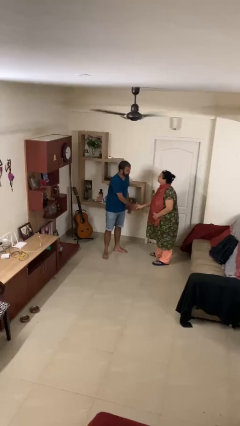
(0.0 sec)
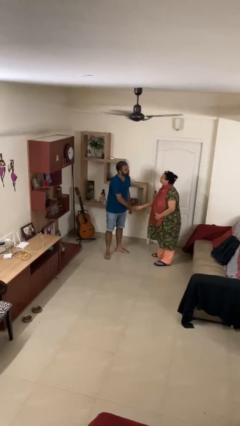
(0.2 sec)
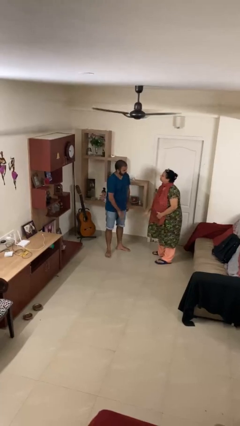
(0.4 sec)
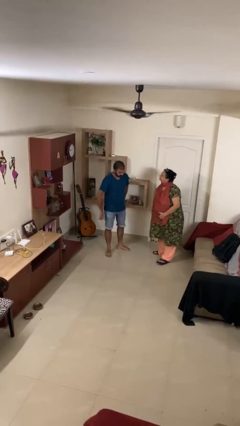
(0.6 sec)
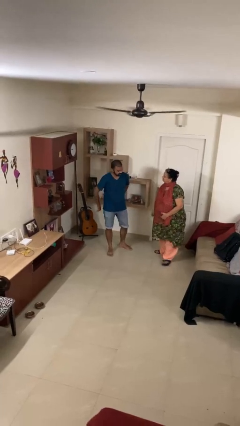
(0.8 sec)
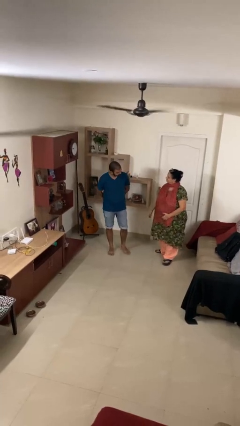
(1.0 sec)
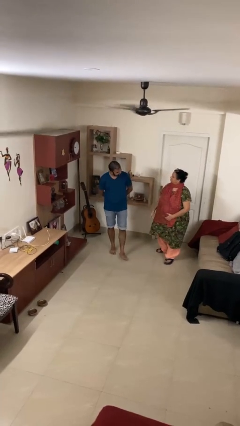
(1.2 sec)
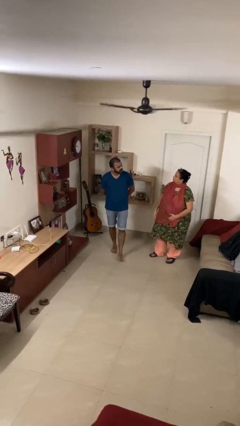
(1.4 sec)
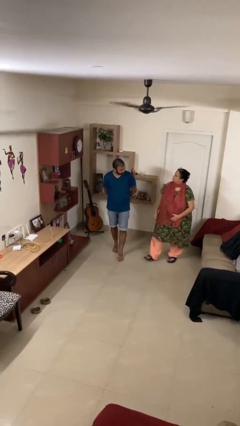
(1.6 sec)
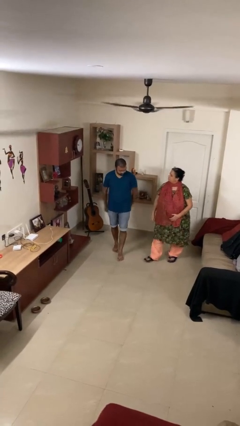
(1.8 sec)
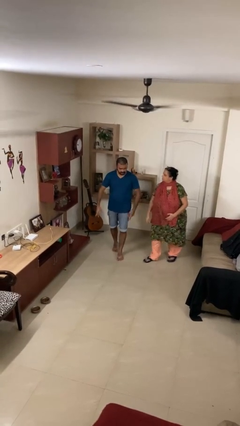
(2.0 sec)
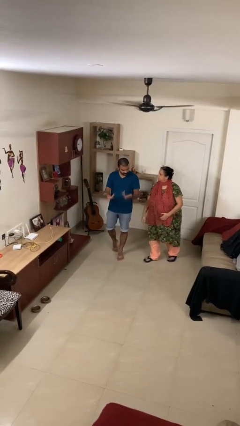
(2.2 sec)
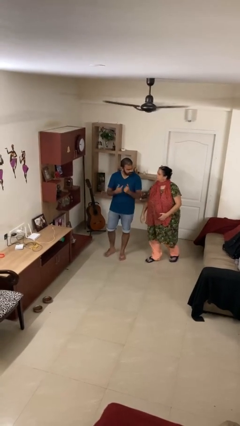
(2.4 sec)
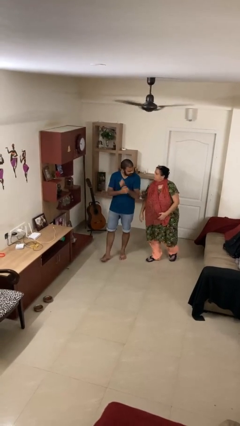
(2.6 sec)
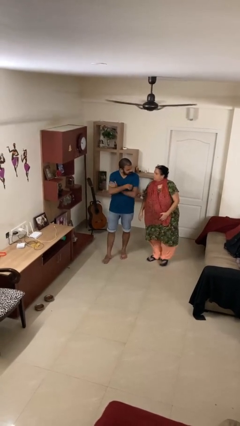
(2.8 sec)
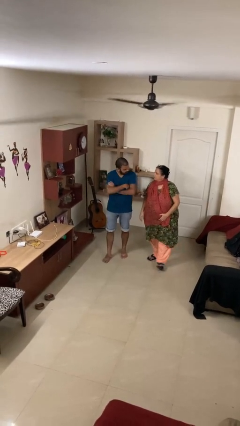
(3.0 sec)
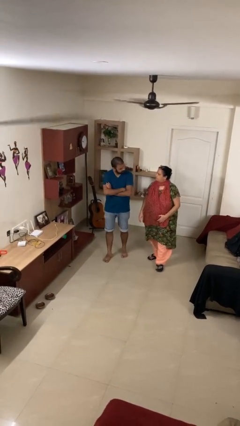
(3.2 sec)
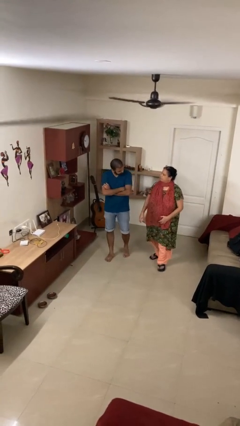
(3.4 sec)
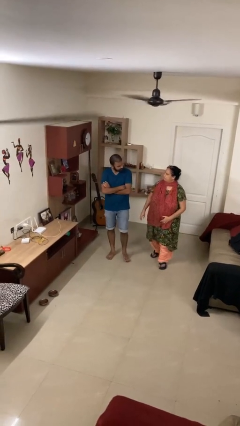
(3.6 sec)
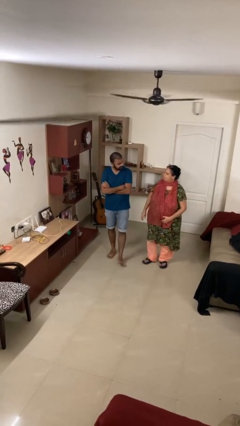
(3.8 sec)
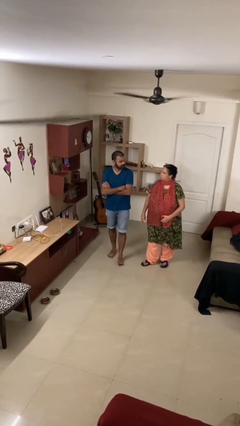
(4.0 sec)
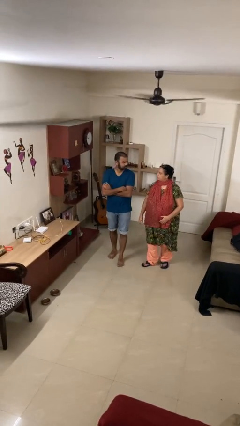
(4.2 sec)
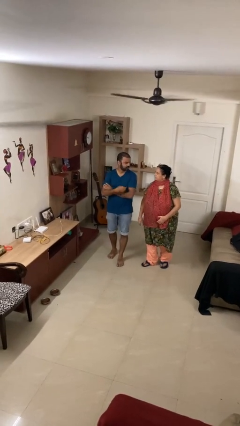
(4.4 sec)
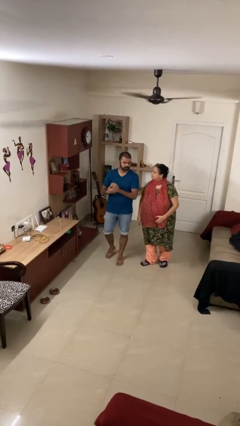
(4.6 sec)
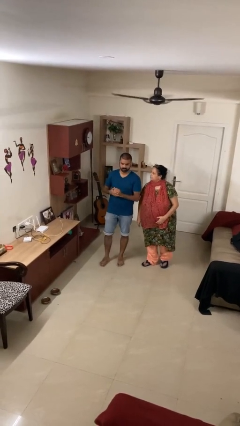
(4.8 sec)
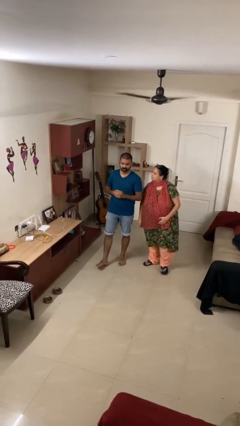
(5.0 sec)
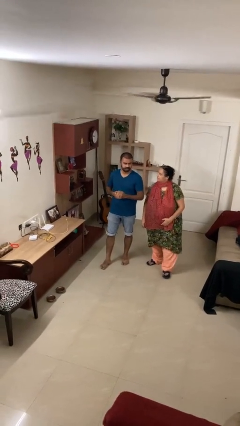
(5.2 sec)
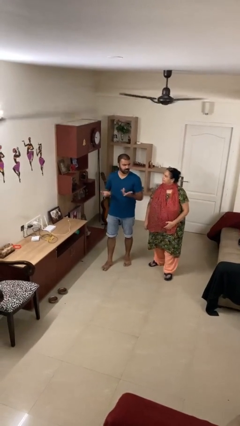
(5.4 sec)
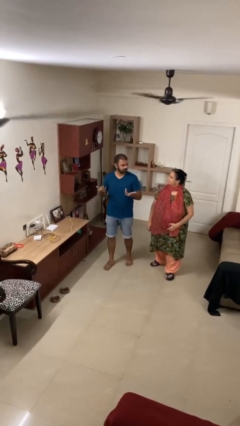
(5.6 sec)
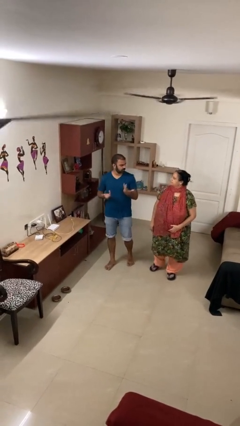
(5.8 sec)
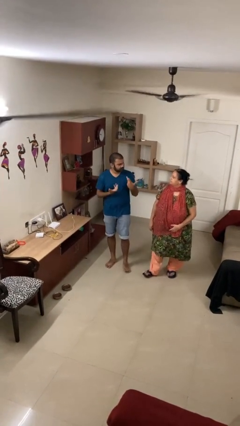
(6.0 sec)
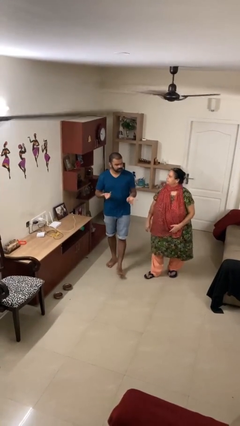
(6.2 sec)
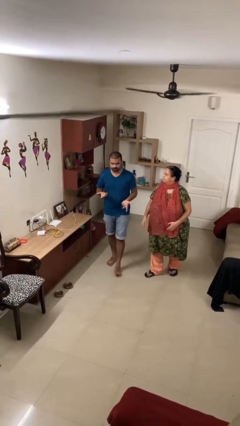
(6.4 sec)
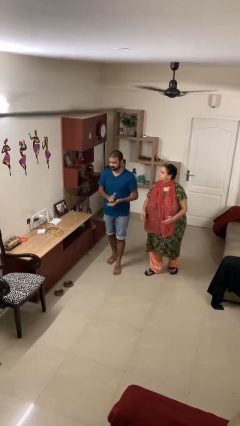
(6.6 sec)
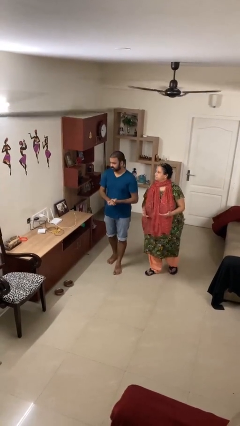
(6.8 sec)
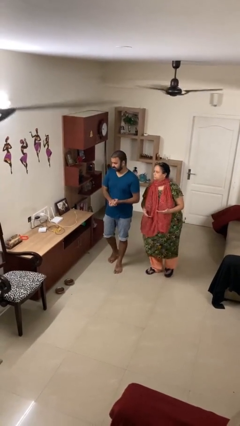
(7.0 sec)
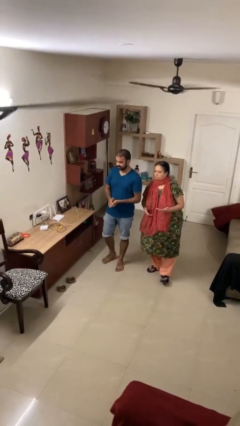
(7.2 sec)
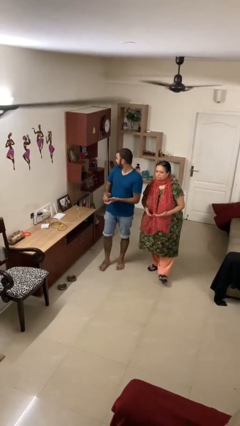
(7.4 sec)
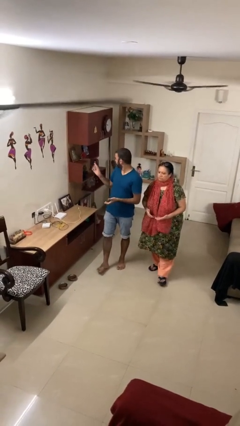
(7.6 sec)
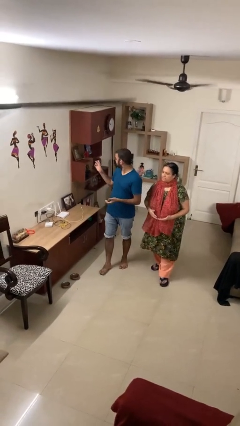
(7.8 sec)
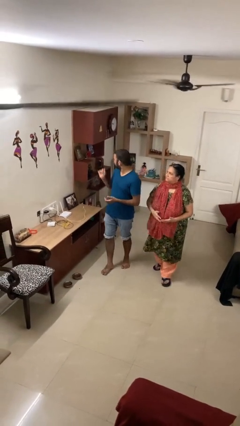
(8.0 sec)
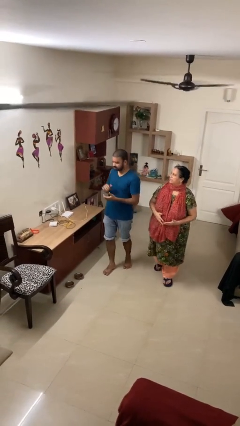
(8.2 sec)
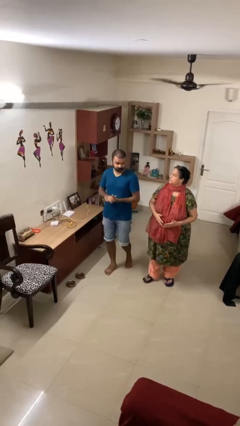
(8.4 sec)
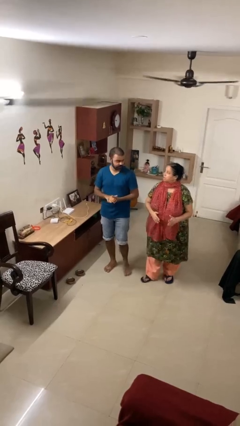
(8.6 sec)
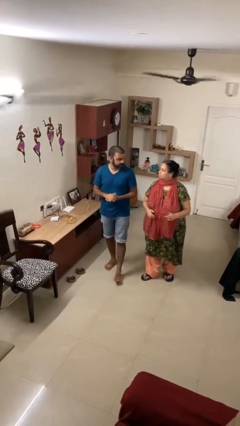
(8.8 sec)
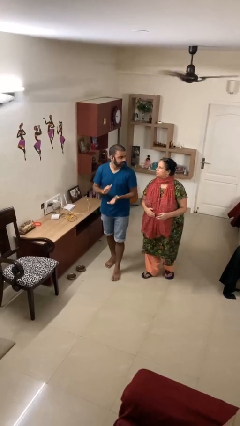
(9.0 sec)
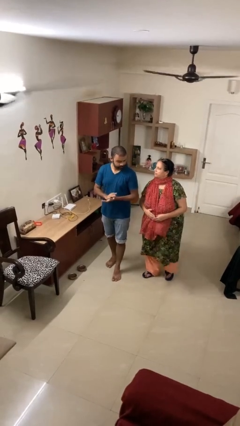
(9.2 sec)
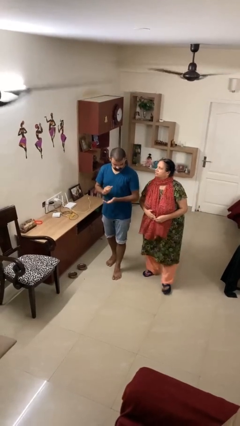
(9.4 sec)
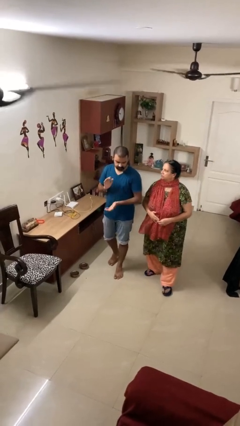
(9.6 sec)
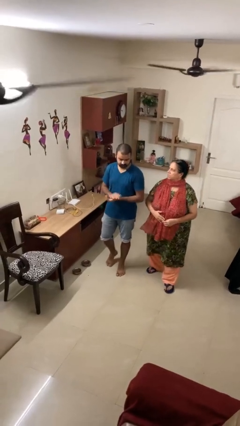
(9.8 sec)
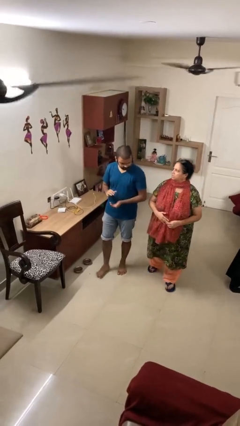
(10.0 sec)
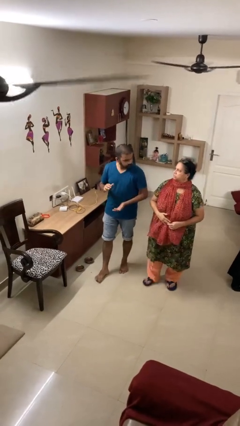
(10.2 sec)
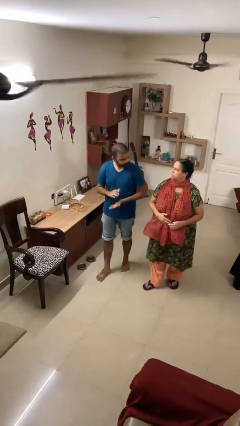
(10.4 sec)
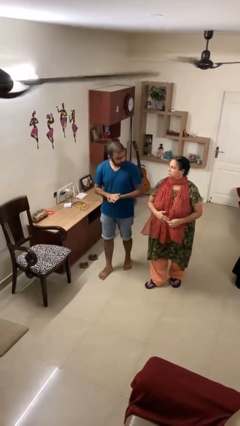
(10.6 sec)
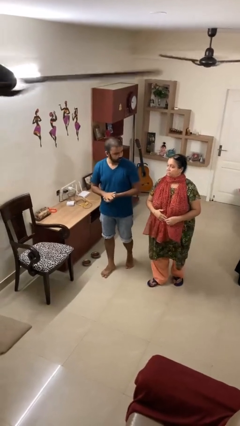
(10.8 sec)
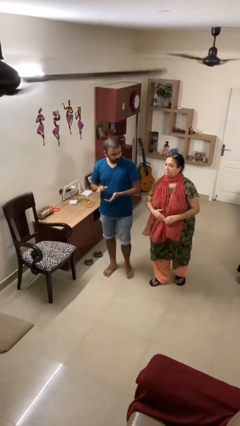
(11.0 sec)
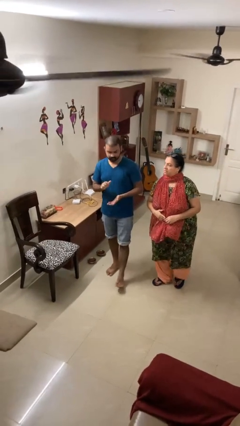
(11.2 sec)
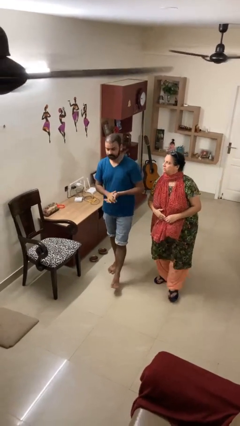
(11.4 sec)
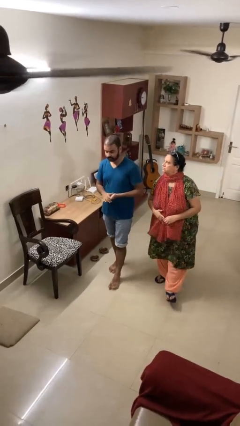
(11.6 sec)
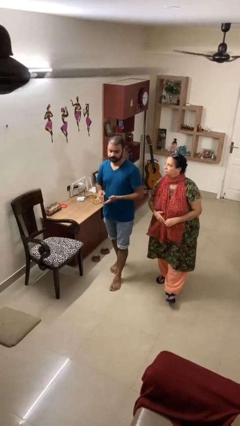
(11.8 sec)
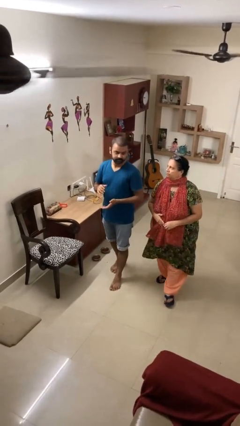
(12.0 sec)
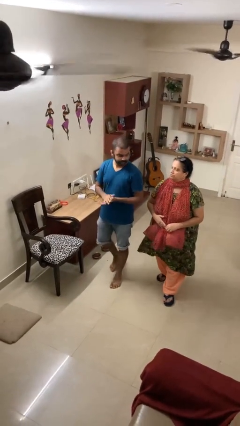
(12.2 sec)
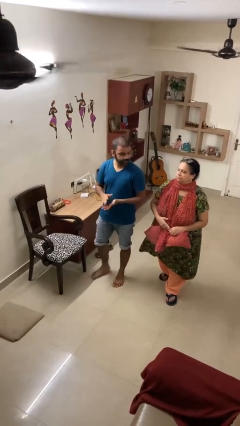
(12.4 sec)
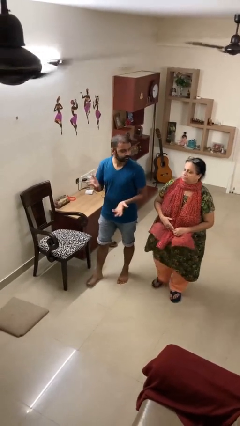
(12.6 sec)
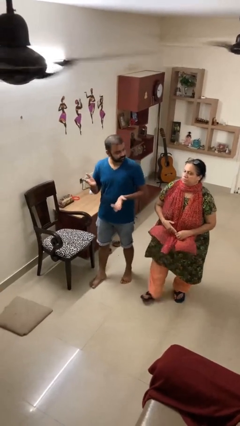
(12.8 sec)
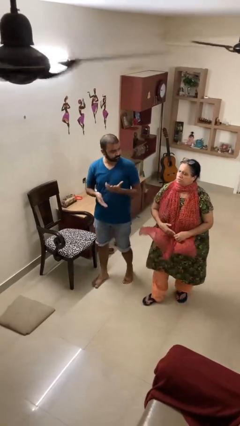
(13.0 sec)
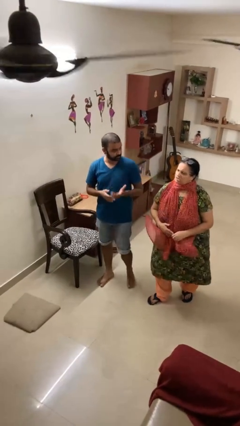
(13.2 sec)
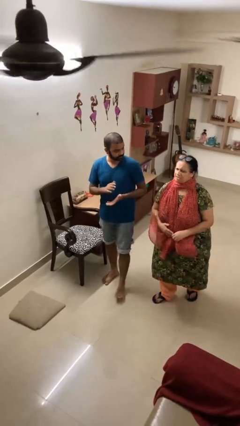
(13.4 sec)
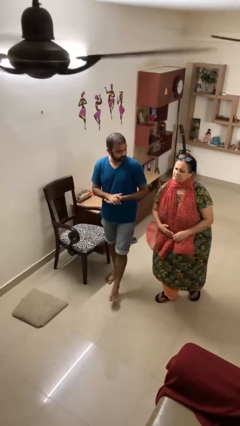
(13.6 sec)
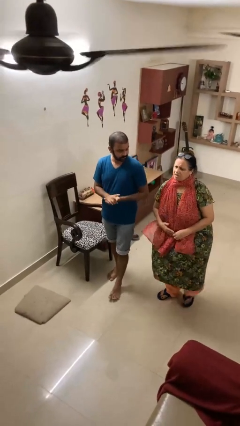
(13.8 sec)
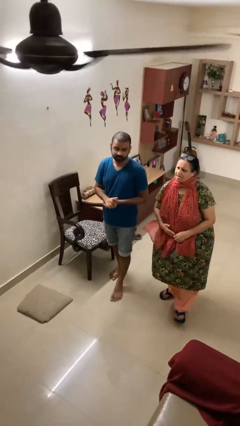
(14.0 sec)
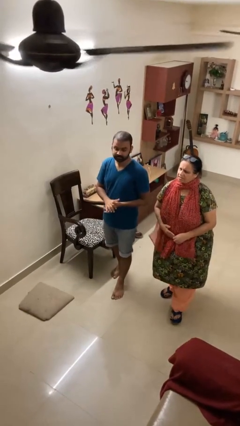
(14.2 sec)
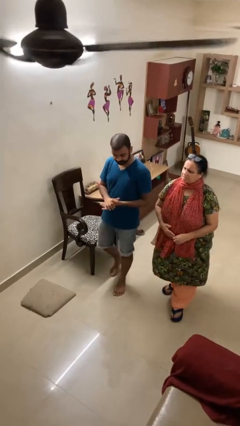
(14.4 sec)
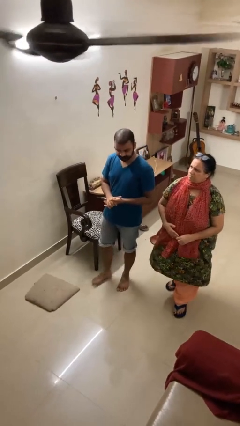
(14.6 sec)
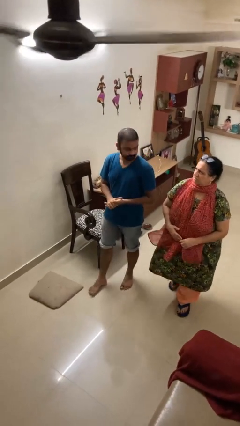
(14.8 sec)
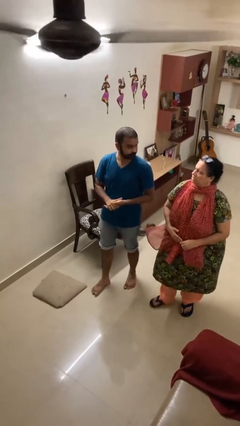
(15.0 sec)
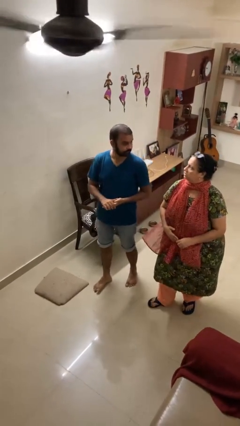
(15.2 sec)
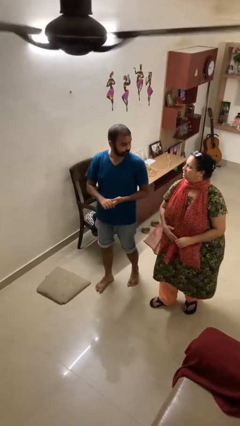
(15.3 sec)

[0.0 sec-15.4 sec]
person talks to person

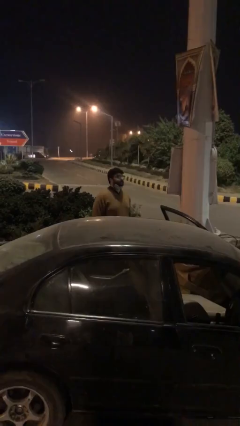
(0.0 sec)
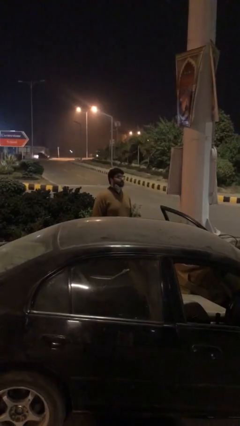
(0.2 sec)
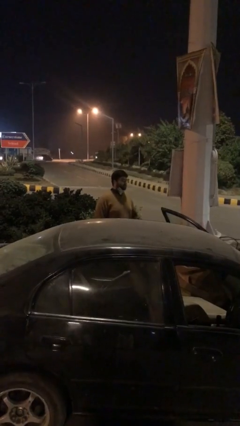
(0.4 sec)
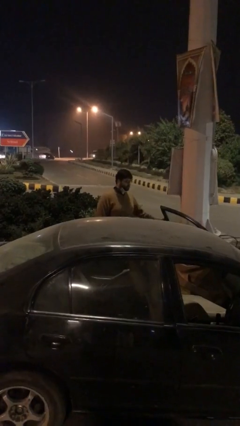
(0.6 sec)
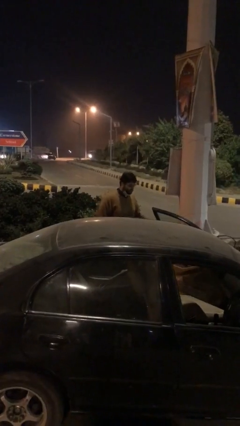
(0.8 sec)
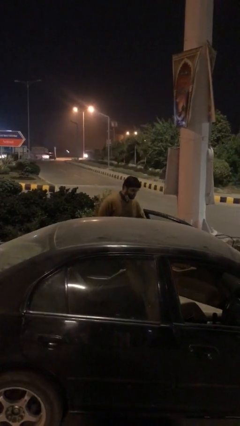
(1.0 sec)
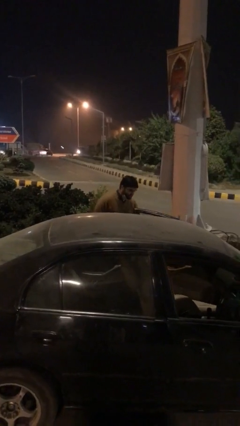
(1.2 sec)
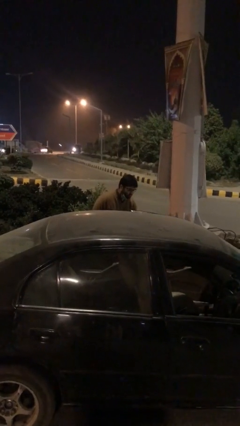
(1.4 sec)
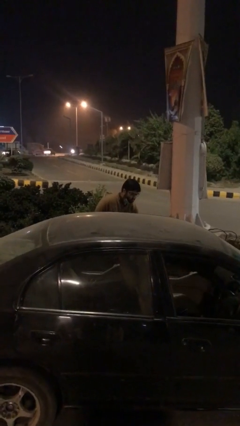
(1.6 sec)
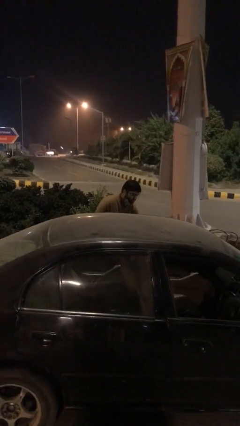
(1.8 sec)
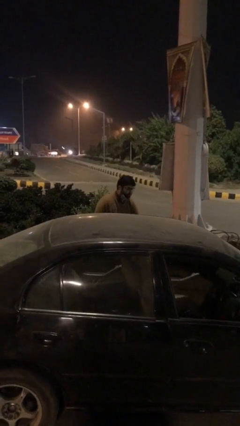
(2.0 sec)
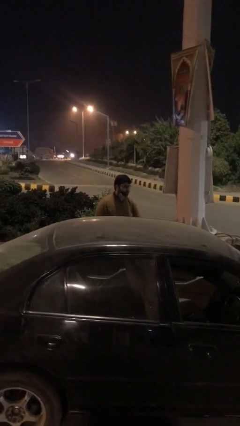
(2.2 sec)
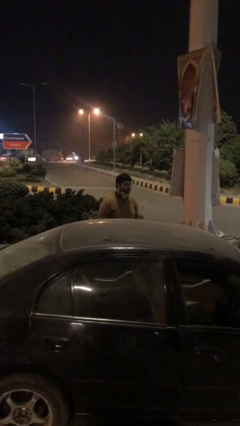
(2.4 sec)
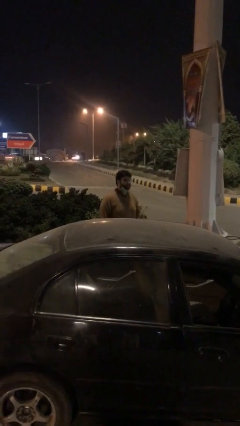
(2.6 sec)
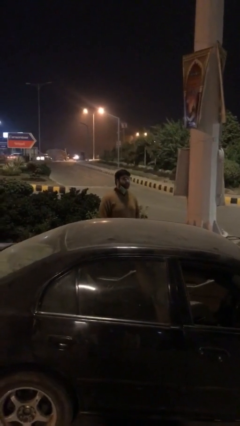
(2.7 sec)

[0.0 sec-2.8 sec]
person closes car door

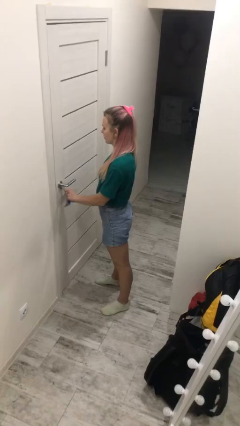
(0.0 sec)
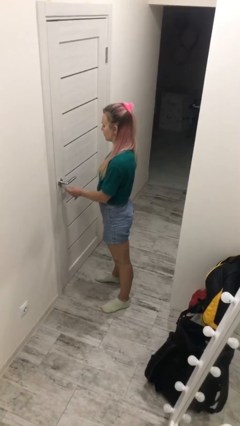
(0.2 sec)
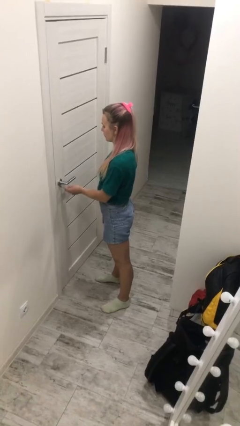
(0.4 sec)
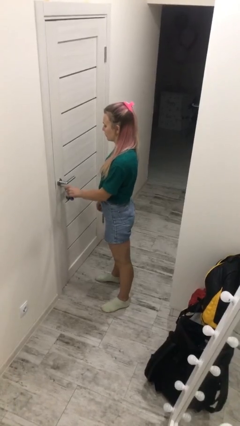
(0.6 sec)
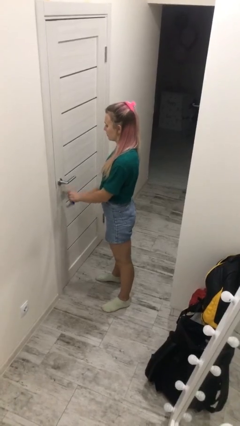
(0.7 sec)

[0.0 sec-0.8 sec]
person unlocks door with keys
